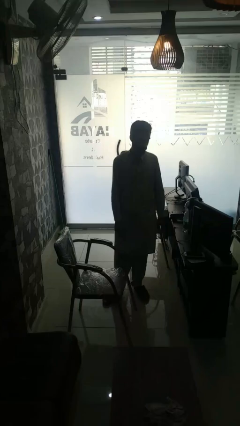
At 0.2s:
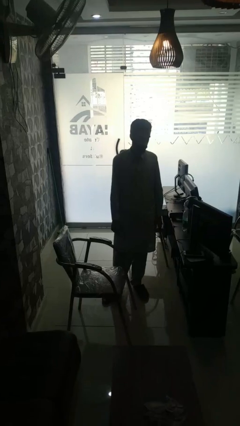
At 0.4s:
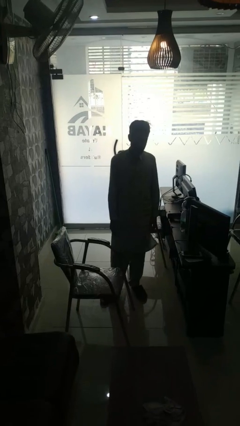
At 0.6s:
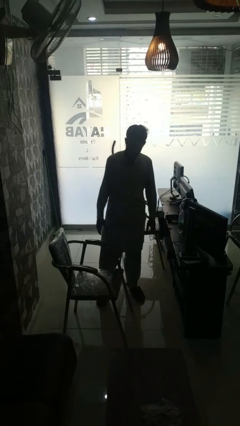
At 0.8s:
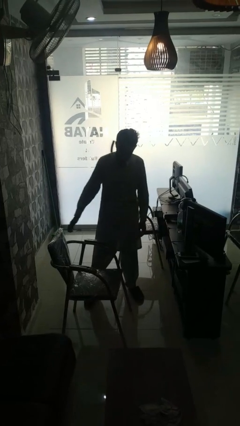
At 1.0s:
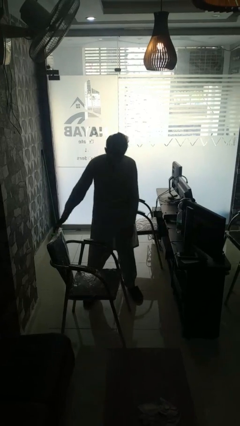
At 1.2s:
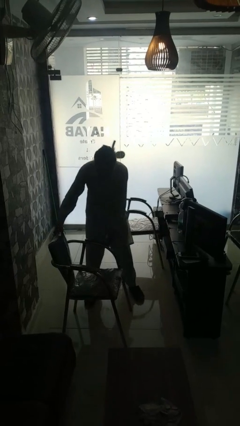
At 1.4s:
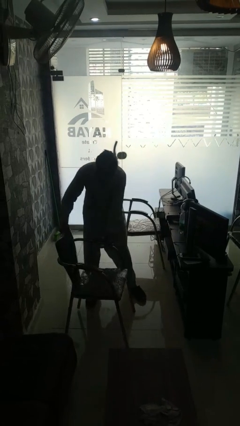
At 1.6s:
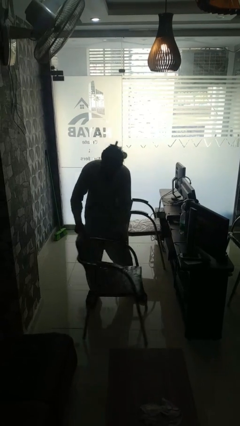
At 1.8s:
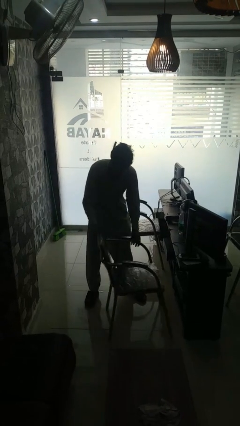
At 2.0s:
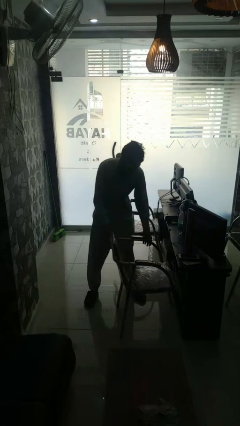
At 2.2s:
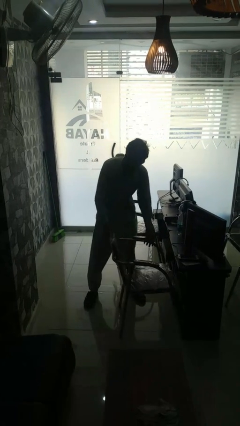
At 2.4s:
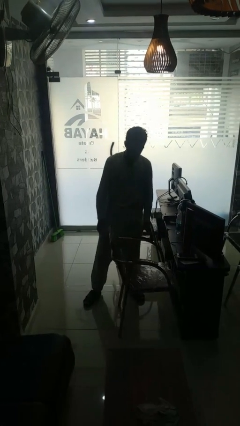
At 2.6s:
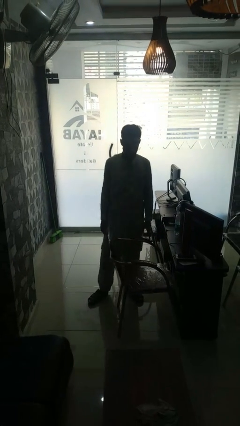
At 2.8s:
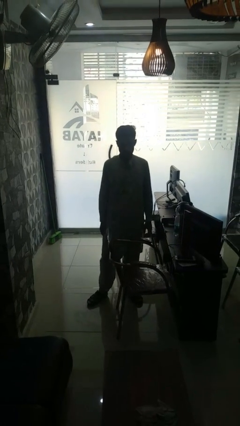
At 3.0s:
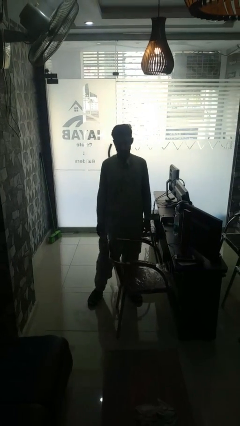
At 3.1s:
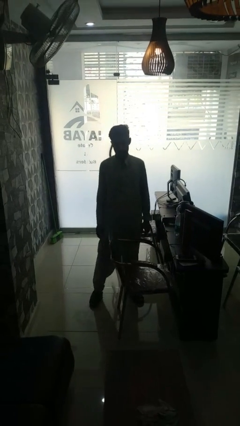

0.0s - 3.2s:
person pushes in chair

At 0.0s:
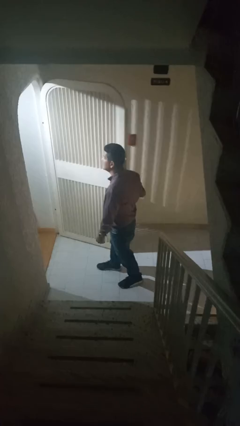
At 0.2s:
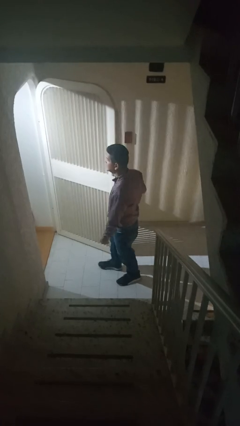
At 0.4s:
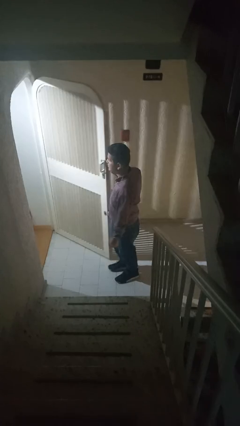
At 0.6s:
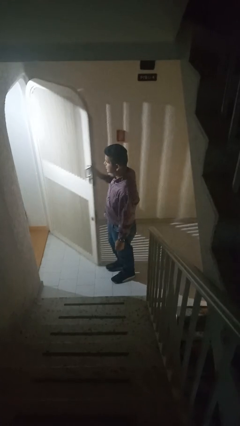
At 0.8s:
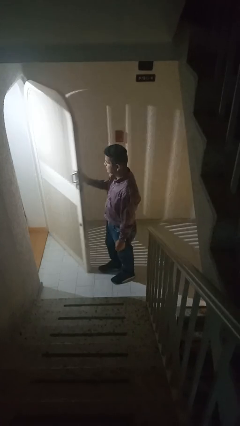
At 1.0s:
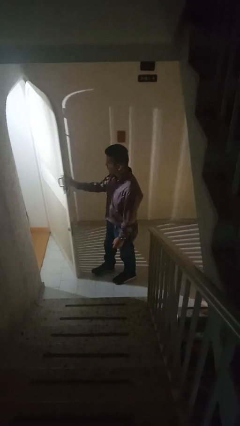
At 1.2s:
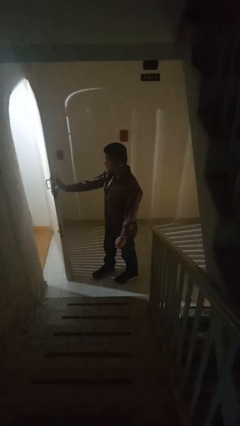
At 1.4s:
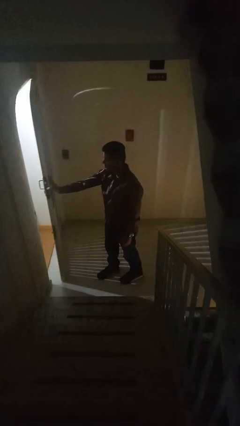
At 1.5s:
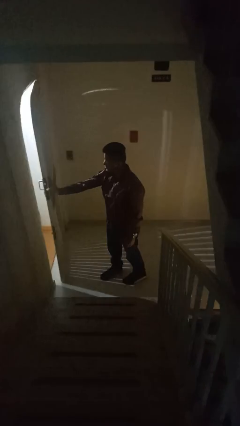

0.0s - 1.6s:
person closes facility door

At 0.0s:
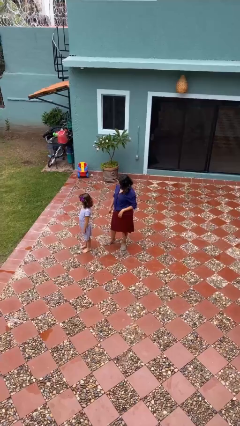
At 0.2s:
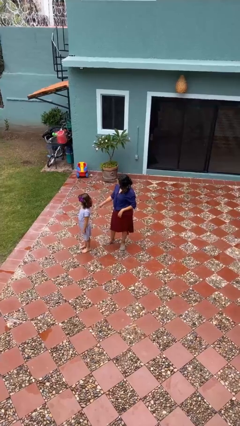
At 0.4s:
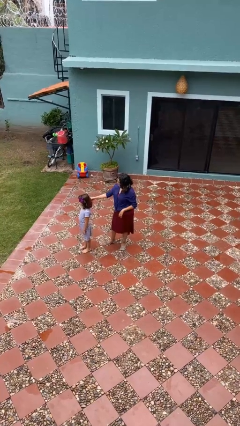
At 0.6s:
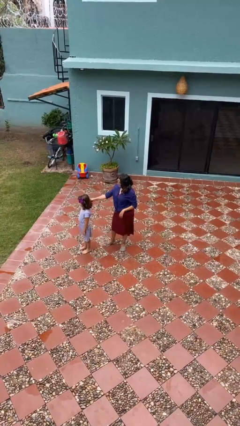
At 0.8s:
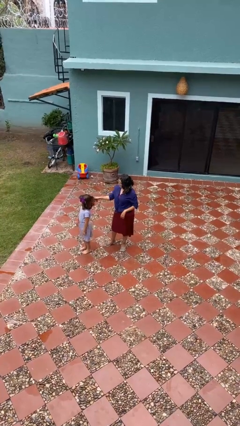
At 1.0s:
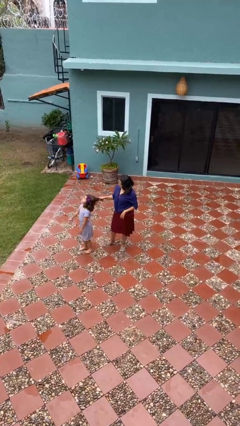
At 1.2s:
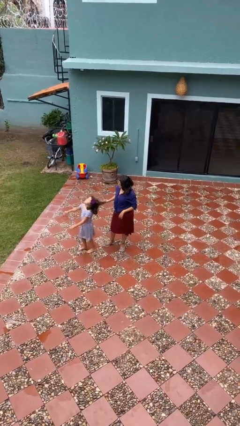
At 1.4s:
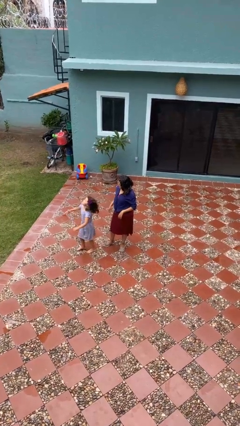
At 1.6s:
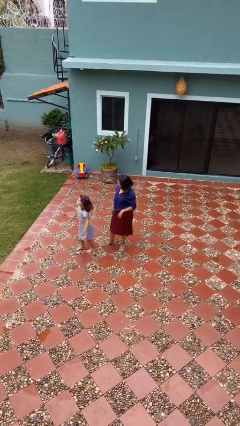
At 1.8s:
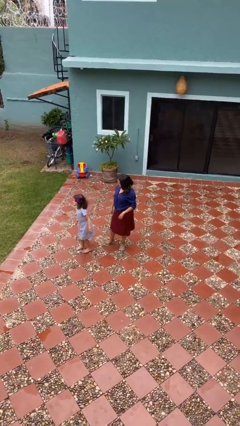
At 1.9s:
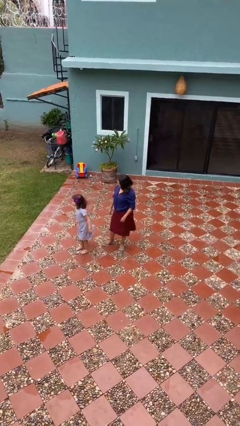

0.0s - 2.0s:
person grabs person by hair

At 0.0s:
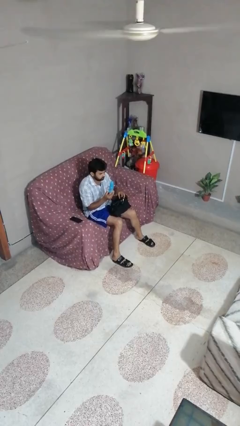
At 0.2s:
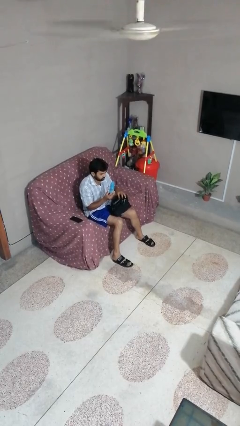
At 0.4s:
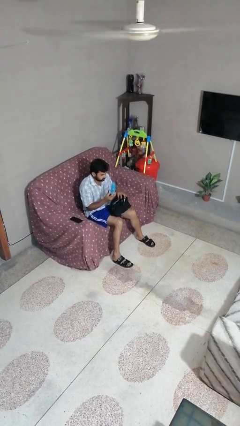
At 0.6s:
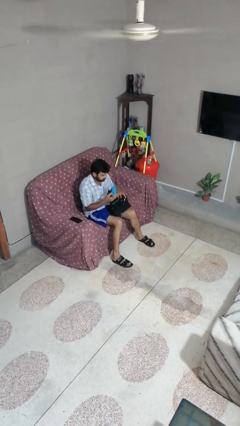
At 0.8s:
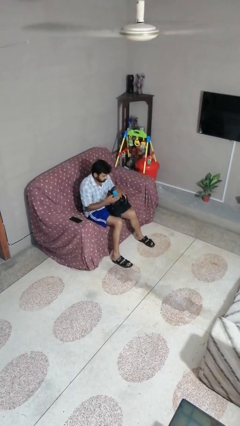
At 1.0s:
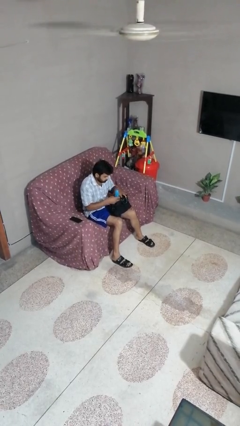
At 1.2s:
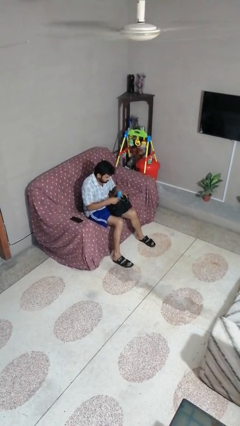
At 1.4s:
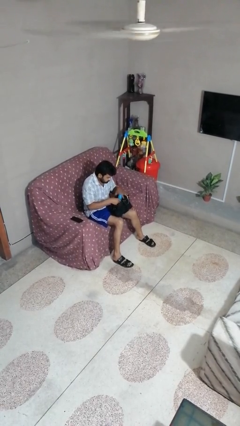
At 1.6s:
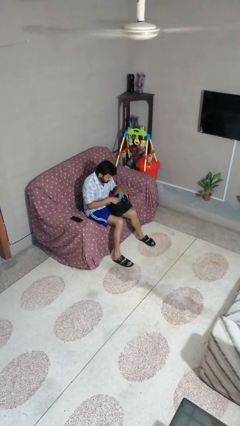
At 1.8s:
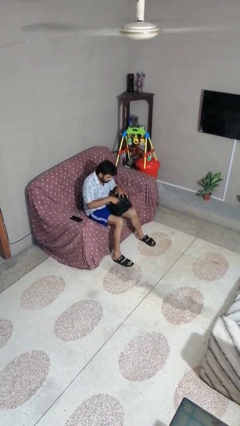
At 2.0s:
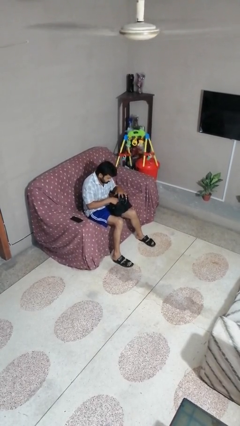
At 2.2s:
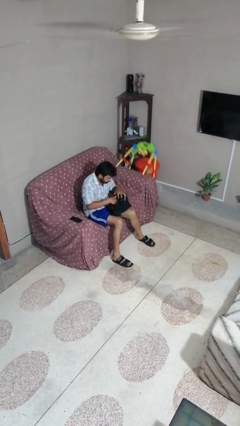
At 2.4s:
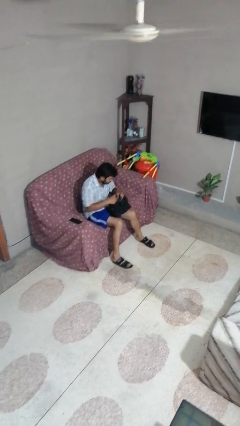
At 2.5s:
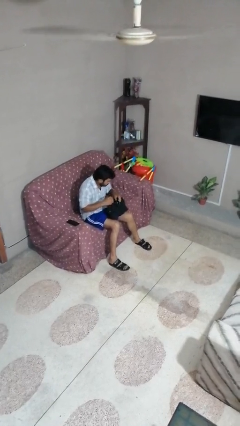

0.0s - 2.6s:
person puts object into purse

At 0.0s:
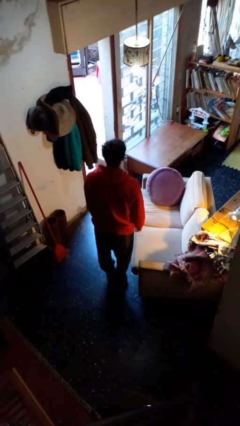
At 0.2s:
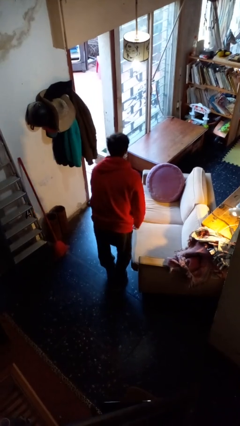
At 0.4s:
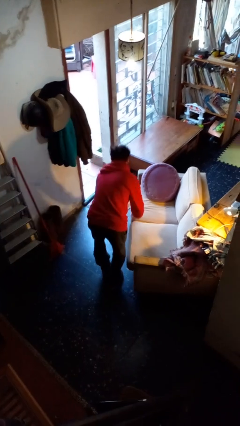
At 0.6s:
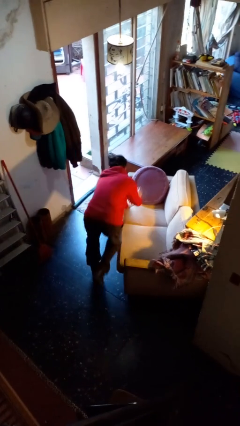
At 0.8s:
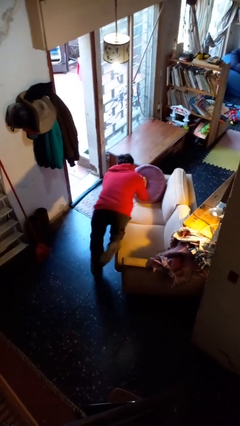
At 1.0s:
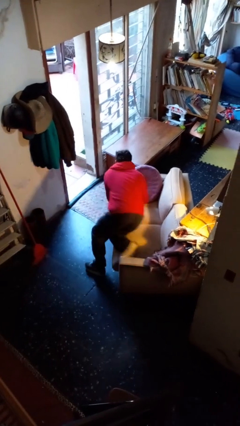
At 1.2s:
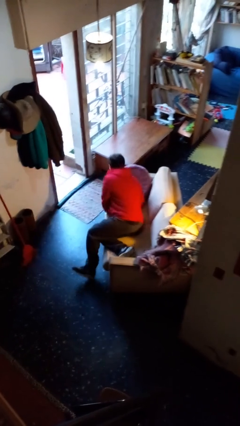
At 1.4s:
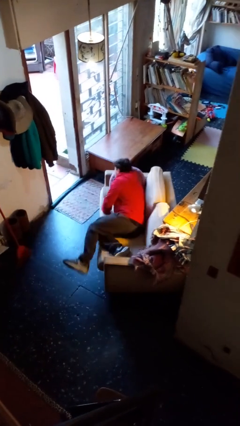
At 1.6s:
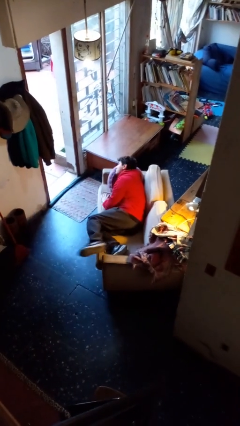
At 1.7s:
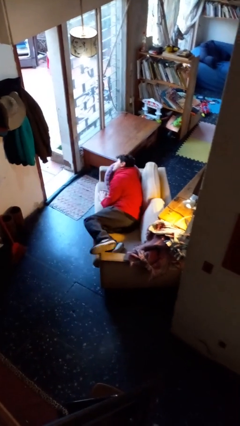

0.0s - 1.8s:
person lies down on couch

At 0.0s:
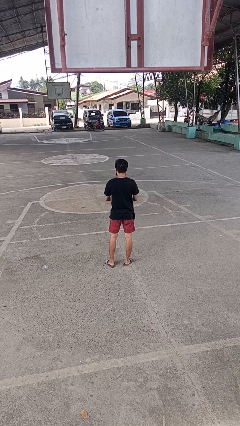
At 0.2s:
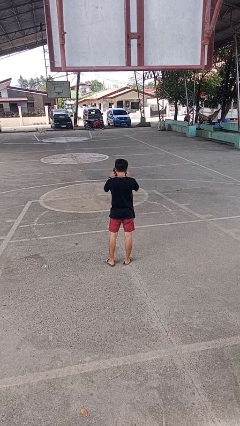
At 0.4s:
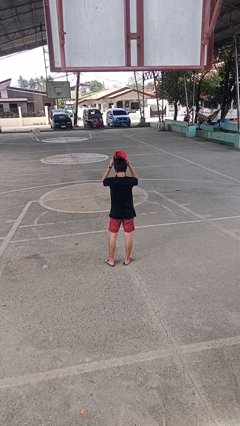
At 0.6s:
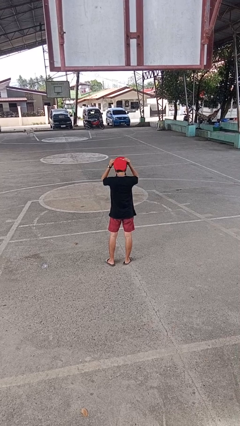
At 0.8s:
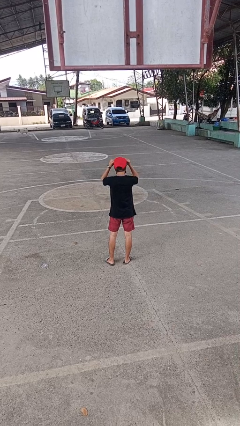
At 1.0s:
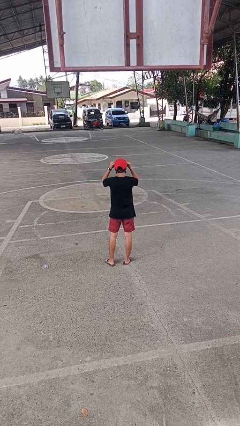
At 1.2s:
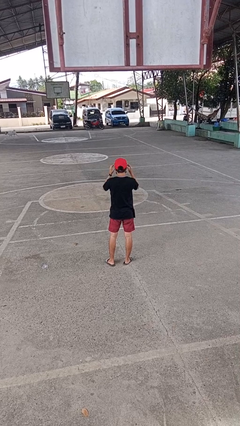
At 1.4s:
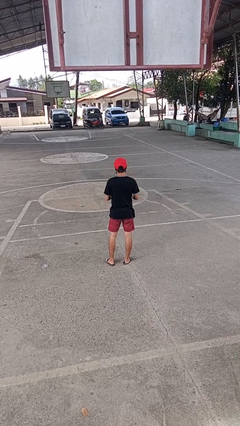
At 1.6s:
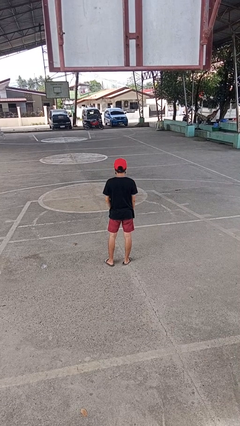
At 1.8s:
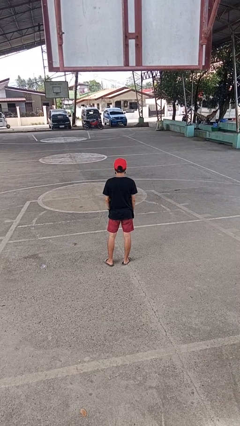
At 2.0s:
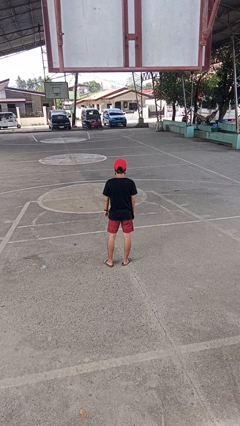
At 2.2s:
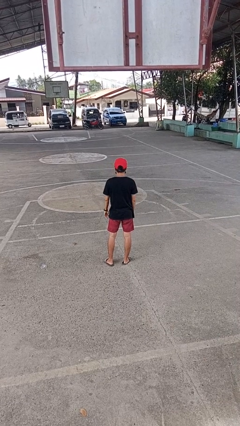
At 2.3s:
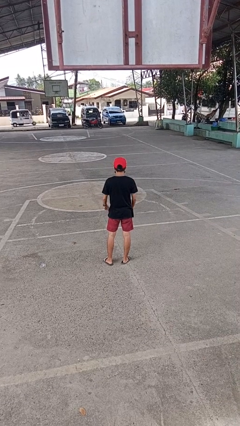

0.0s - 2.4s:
person puts on hat

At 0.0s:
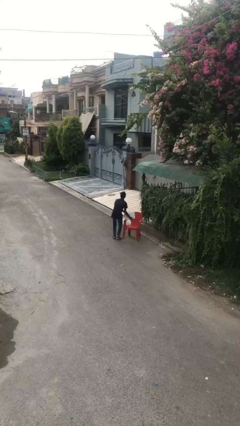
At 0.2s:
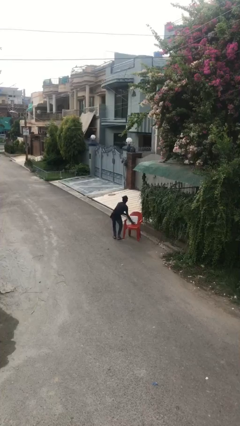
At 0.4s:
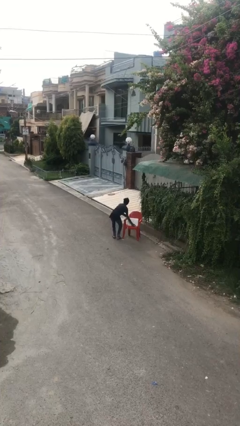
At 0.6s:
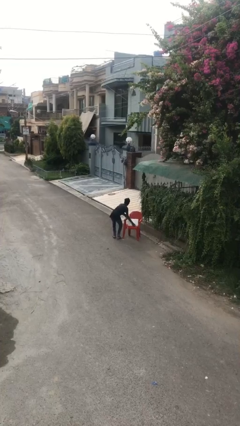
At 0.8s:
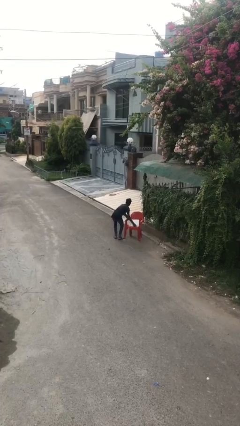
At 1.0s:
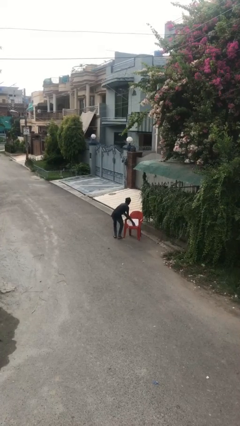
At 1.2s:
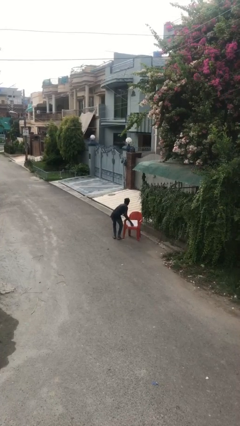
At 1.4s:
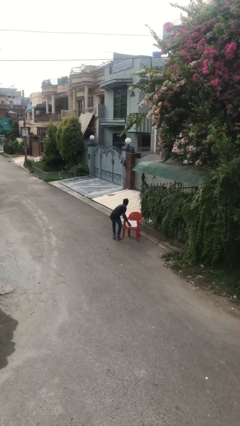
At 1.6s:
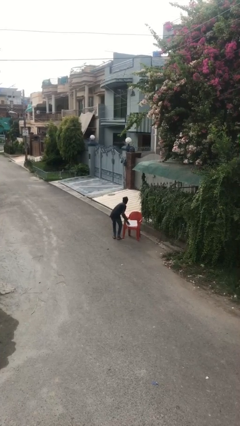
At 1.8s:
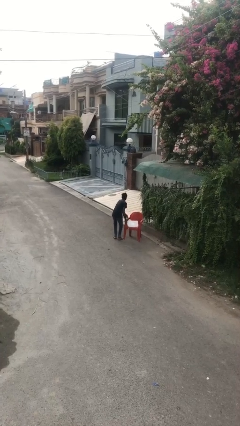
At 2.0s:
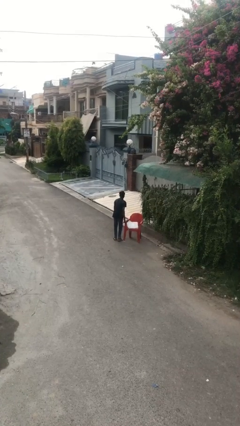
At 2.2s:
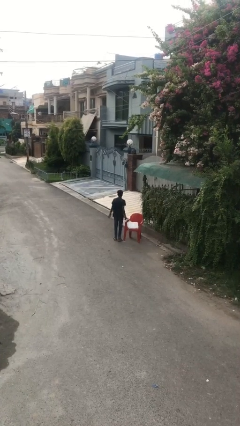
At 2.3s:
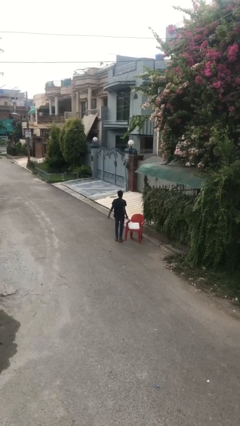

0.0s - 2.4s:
person puts down object on table

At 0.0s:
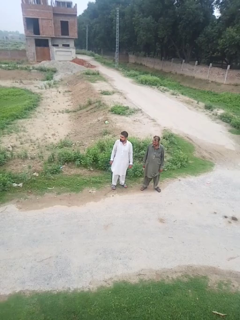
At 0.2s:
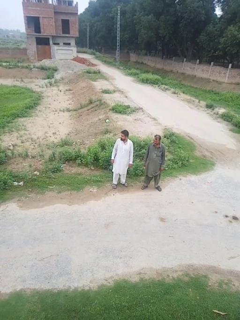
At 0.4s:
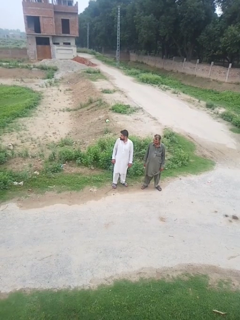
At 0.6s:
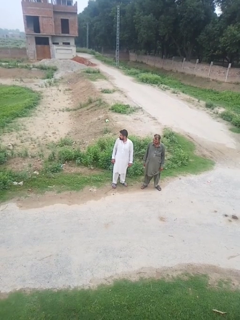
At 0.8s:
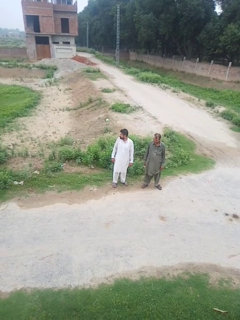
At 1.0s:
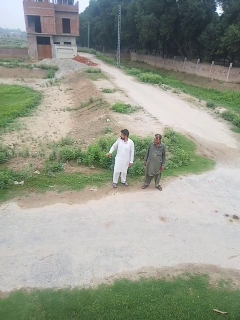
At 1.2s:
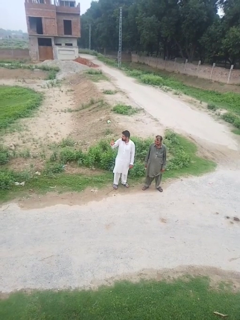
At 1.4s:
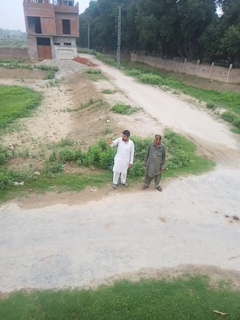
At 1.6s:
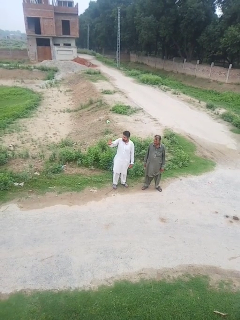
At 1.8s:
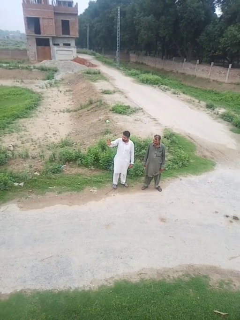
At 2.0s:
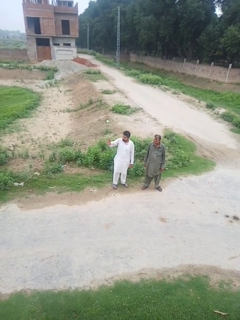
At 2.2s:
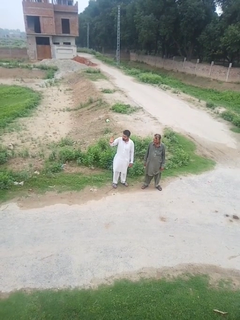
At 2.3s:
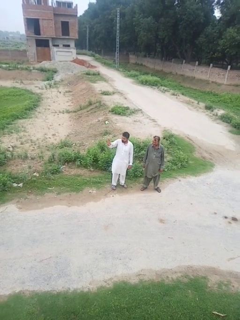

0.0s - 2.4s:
person waves at person
